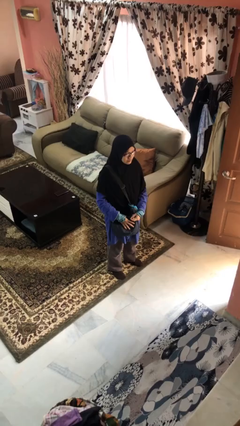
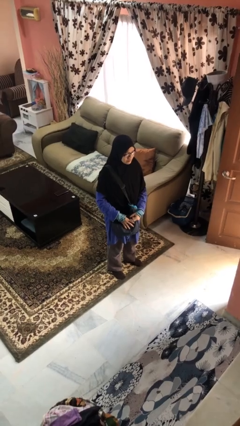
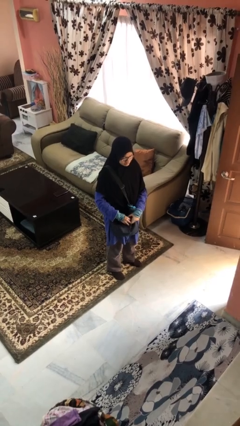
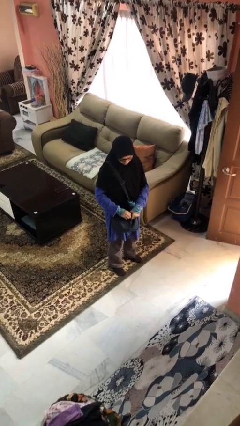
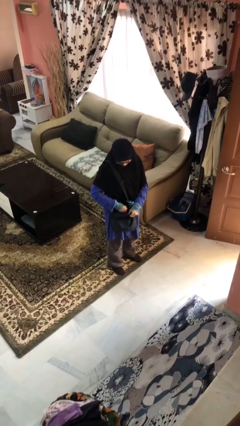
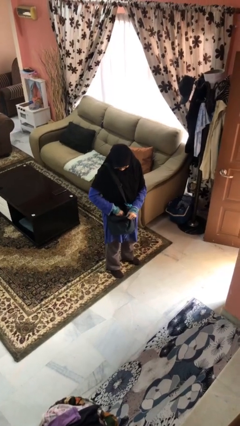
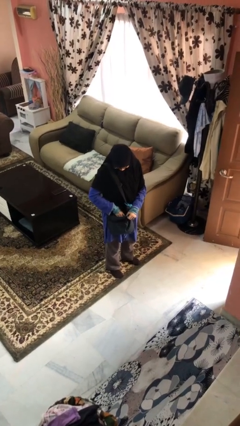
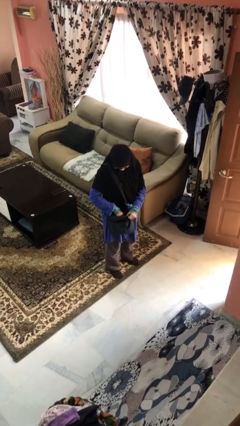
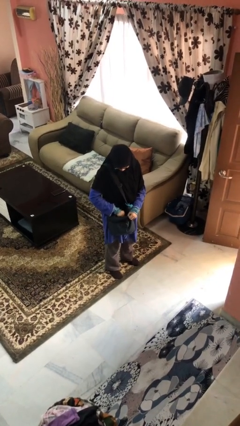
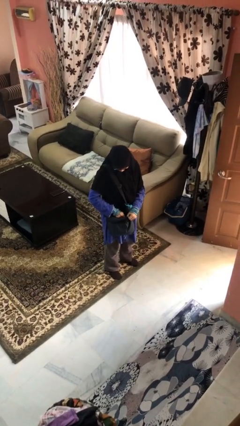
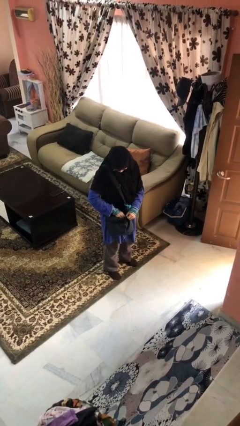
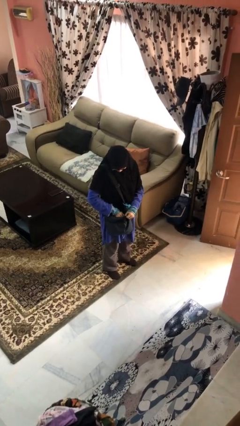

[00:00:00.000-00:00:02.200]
person searches in purse

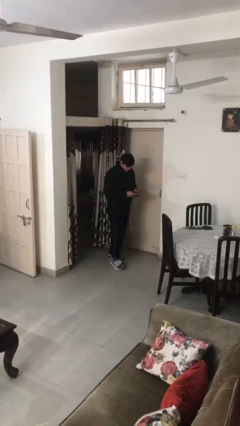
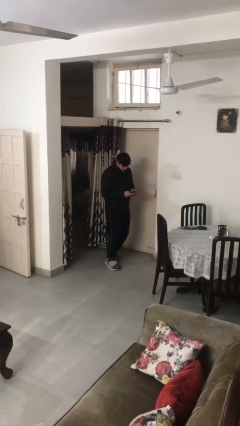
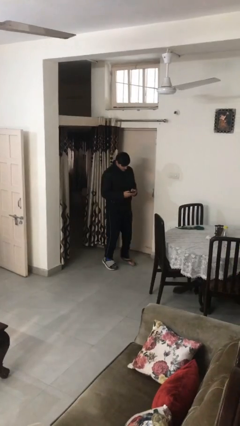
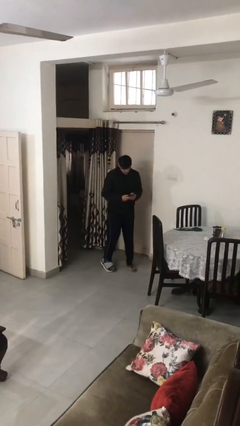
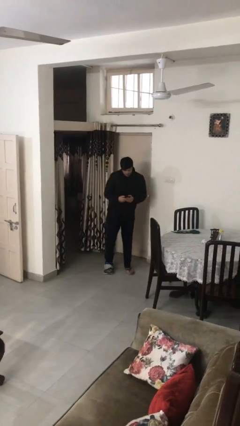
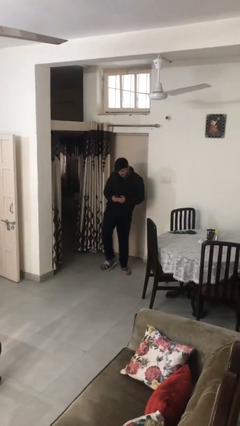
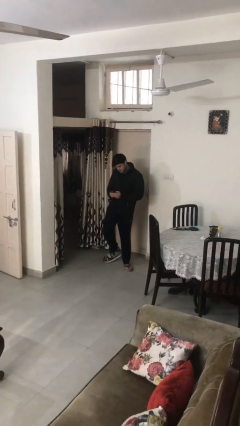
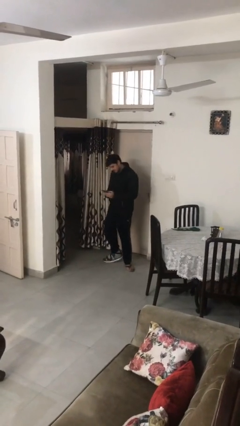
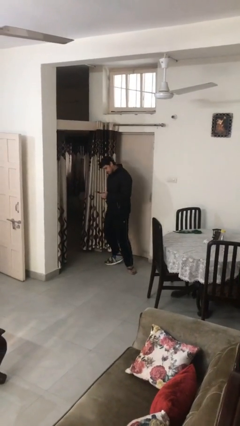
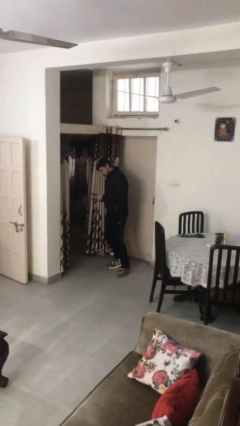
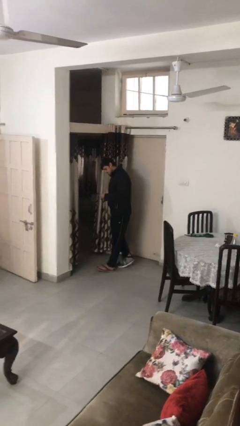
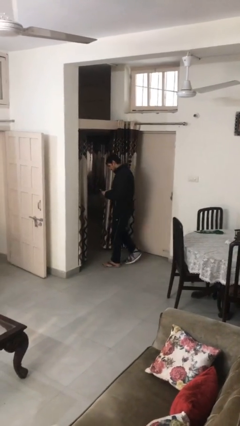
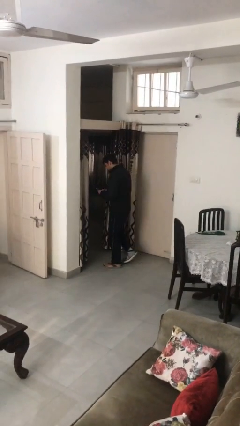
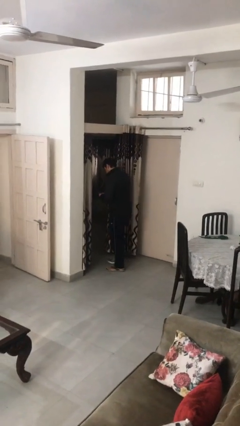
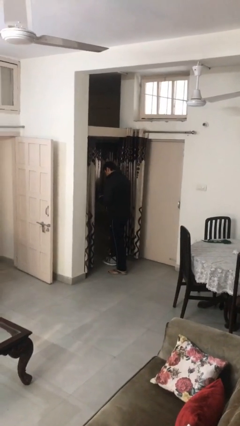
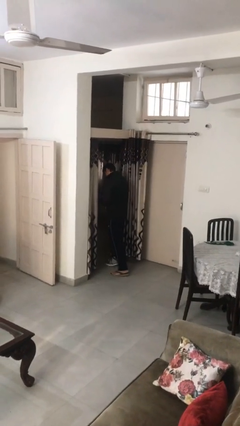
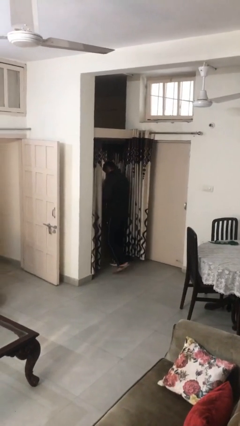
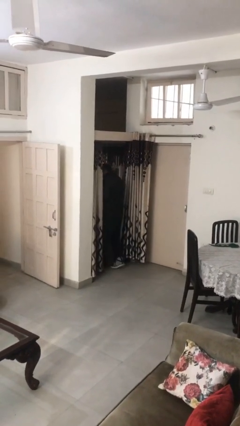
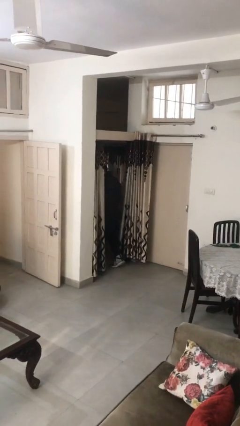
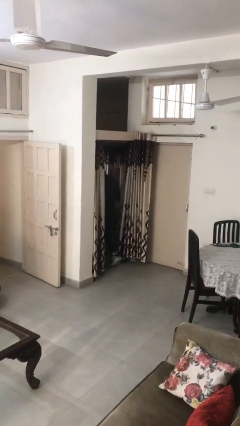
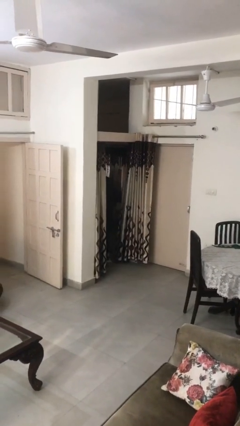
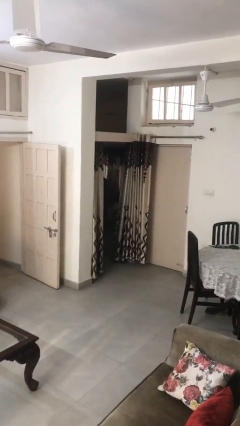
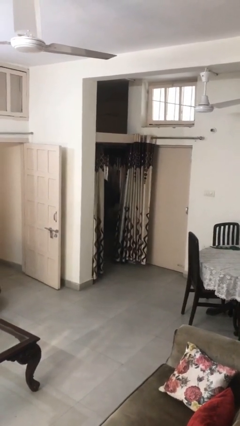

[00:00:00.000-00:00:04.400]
person exits scene through structure

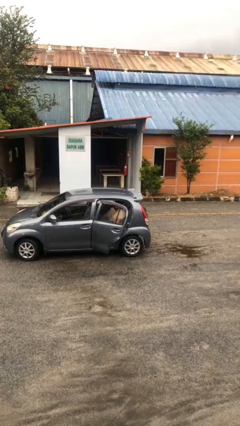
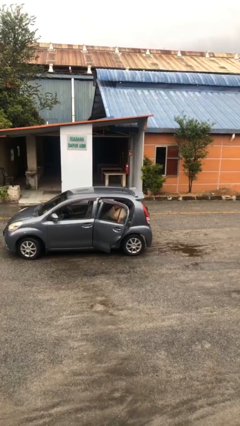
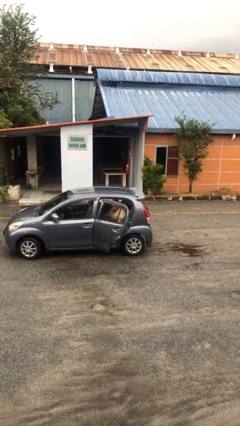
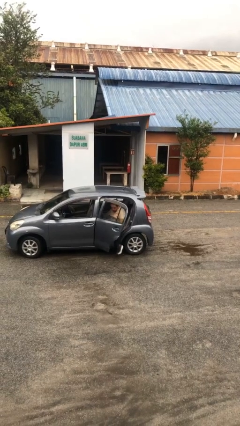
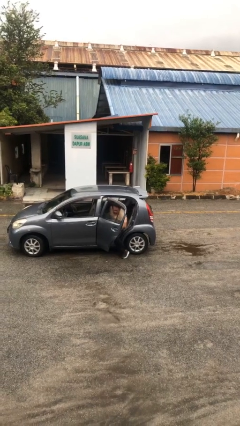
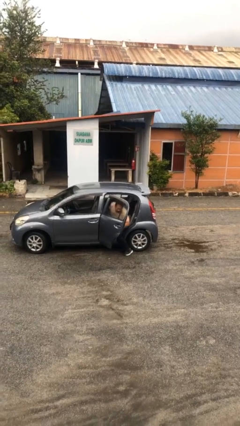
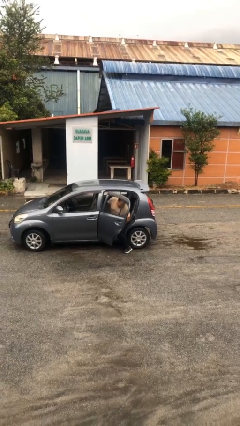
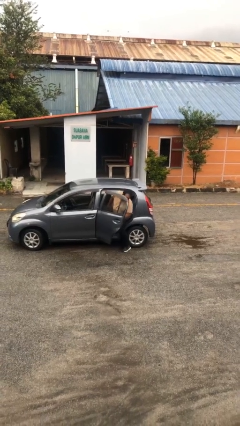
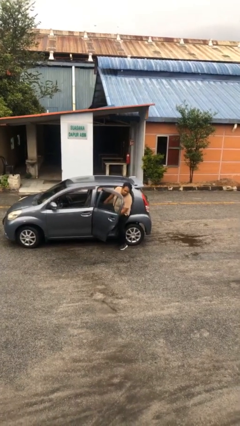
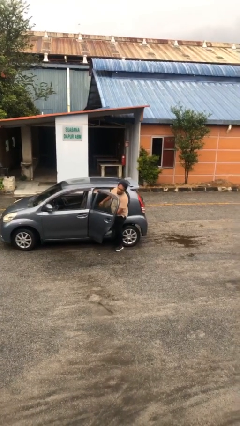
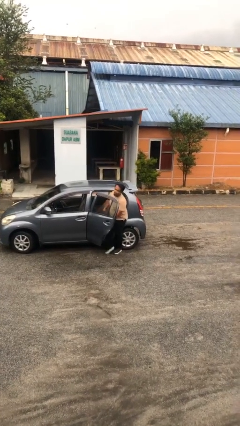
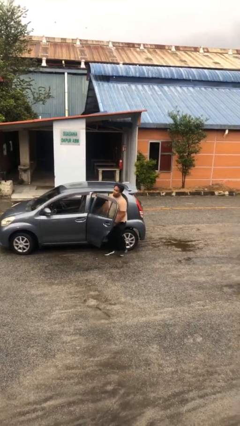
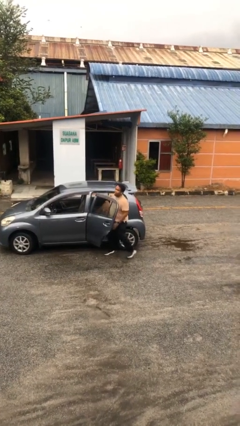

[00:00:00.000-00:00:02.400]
person exits car

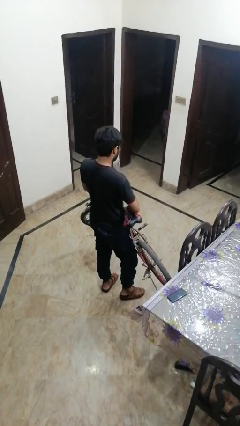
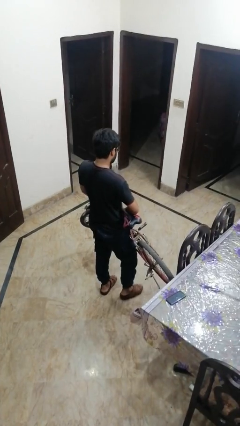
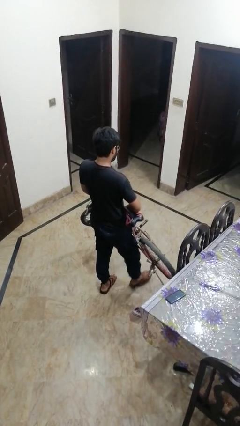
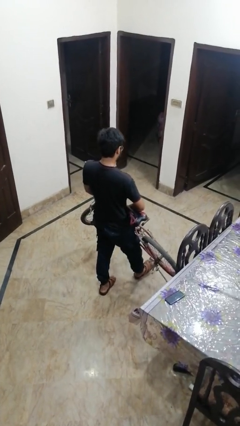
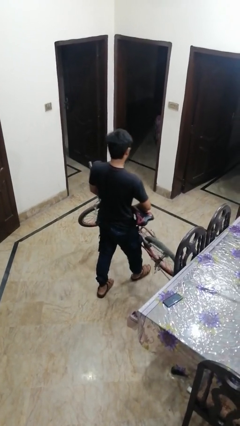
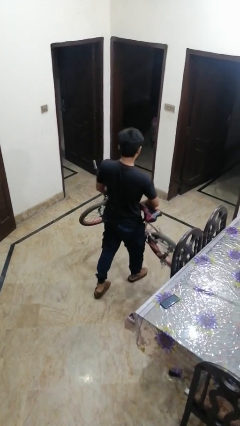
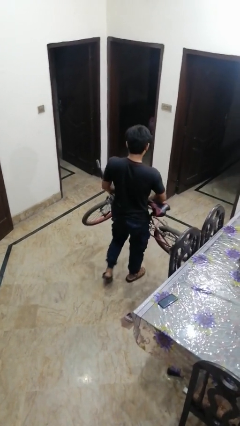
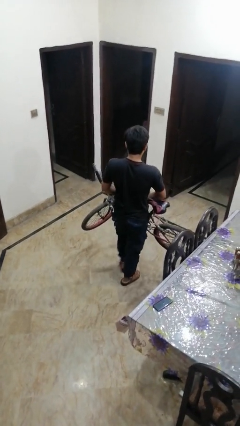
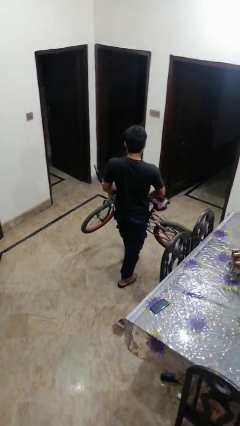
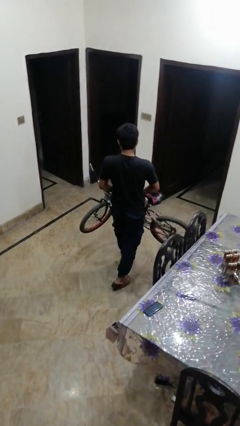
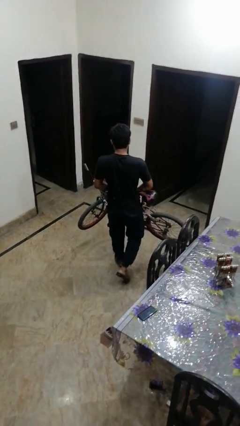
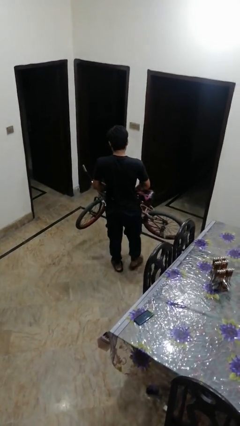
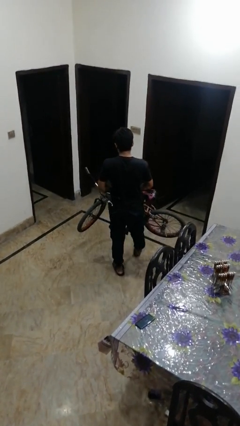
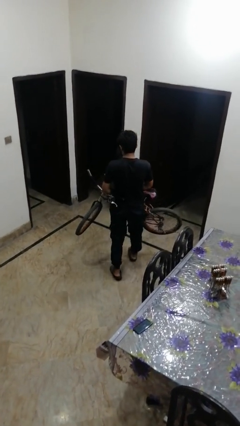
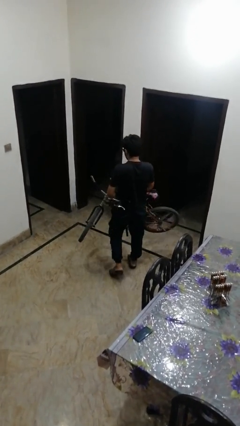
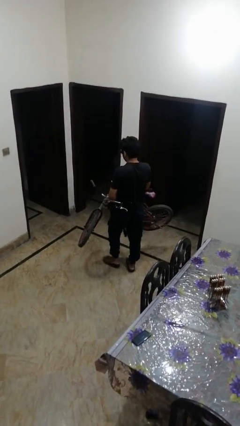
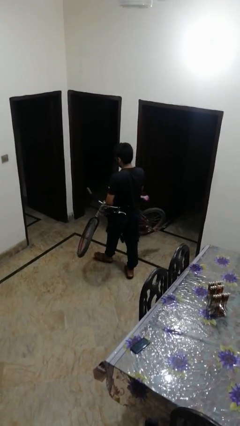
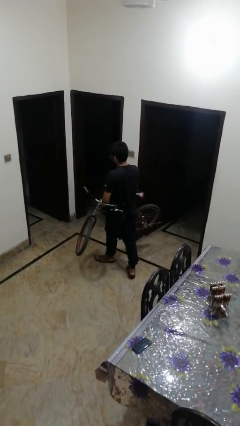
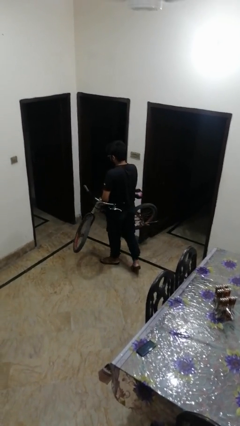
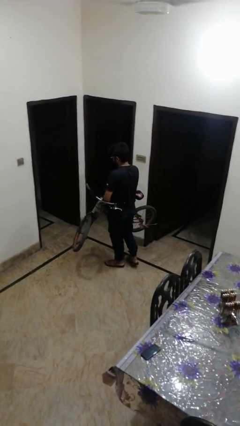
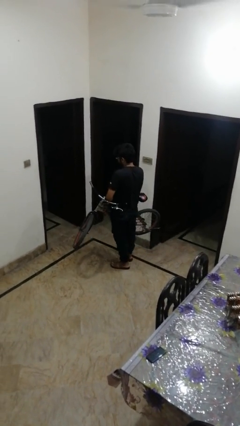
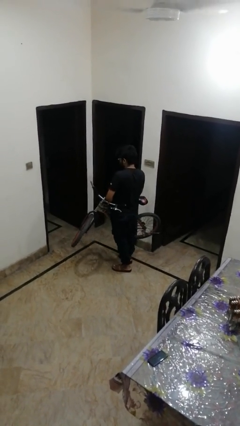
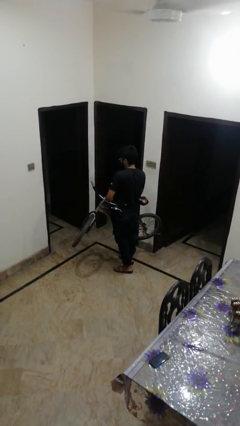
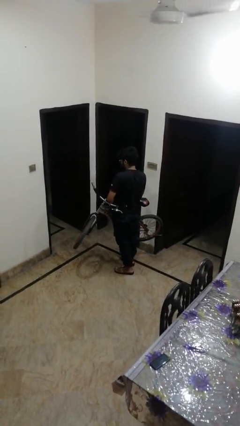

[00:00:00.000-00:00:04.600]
person carries bicycle

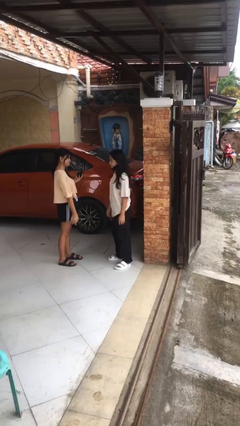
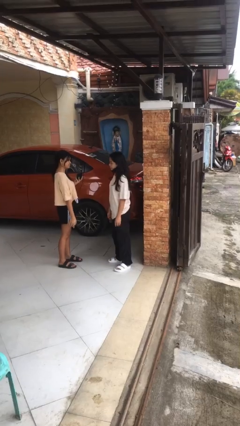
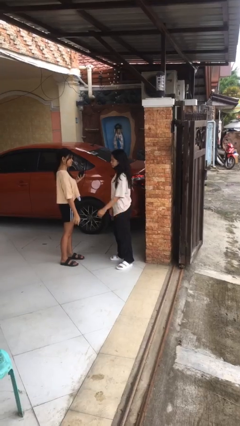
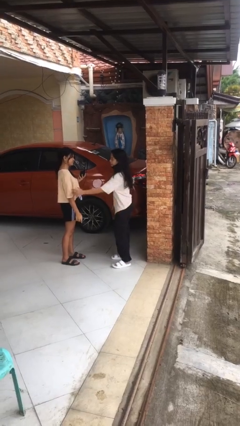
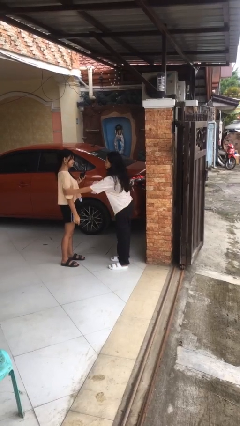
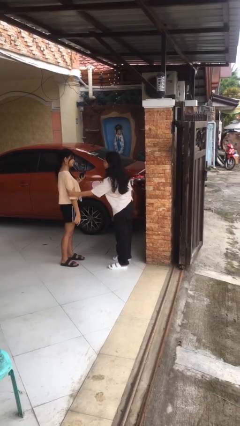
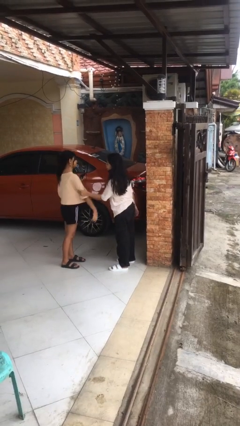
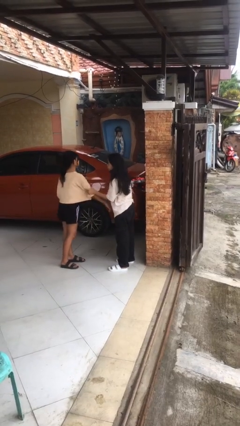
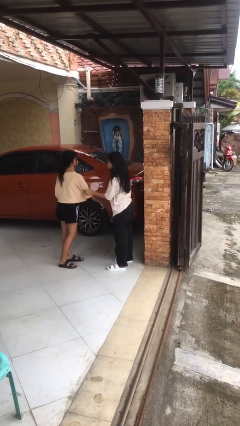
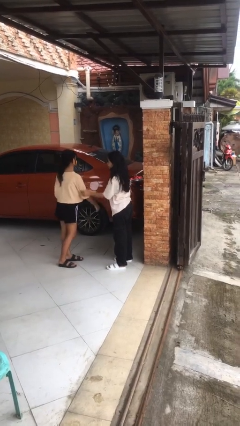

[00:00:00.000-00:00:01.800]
person grabs person by bicep

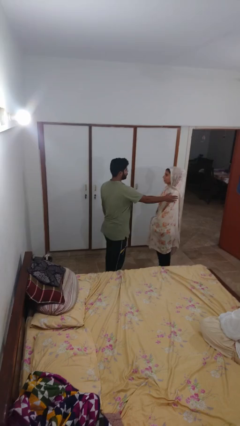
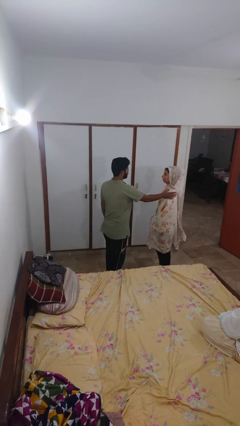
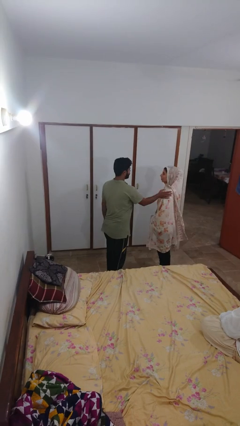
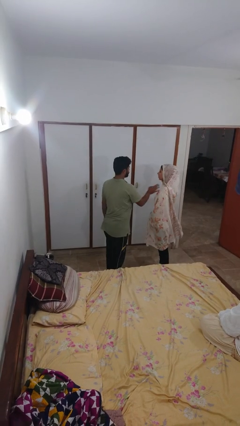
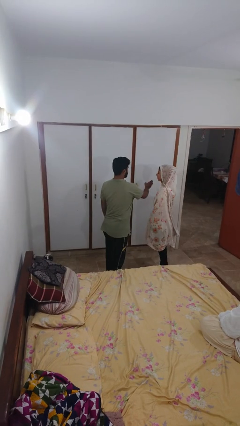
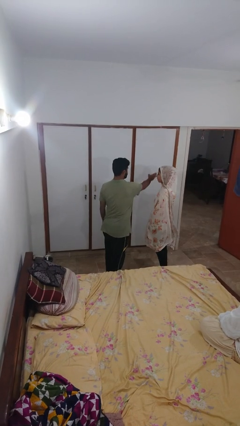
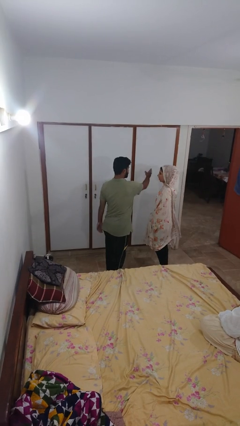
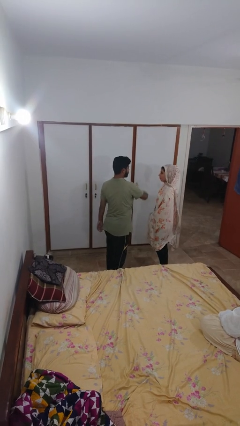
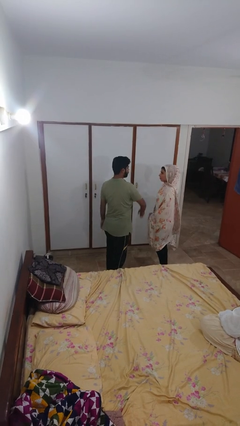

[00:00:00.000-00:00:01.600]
person shoves person
